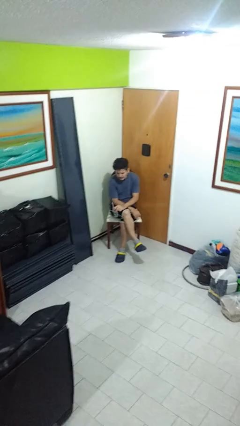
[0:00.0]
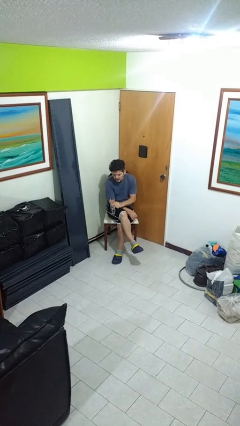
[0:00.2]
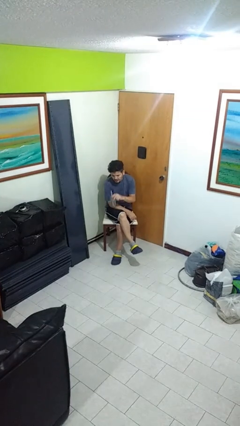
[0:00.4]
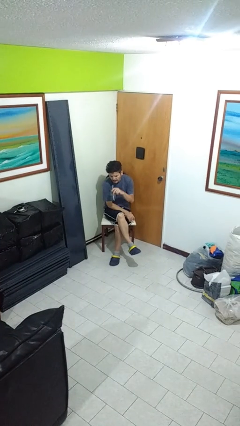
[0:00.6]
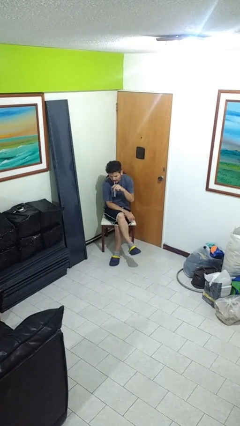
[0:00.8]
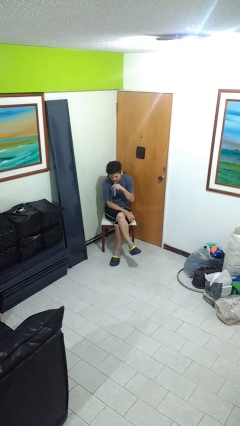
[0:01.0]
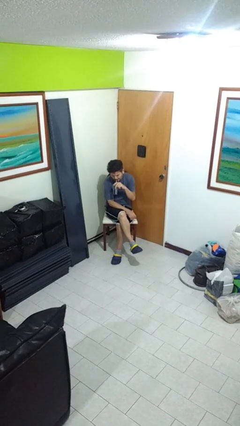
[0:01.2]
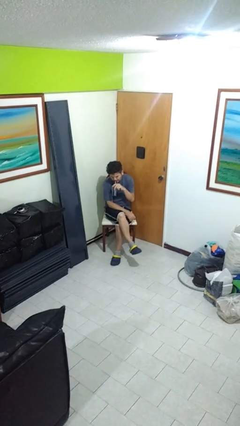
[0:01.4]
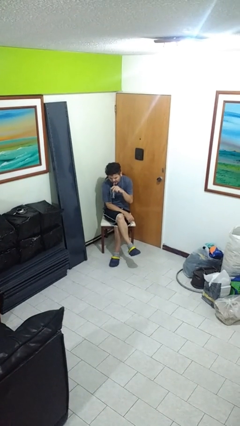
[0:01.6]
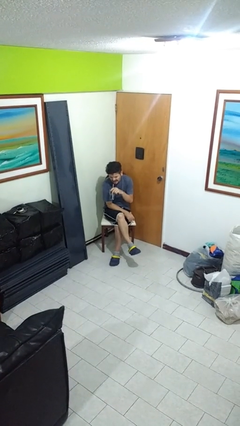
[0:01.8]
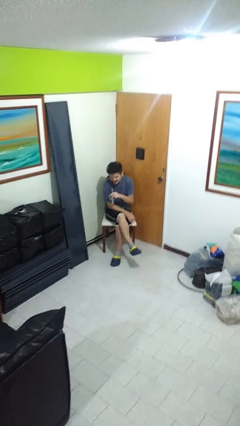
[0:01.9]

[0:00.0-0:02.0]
person drinks from straw

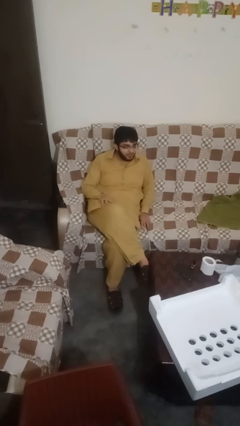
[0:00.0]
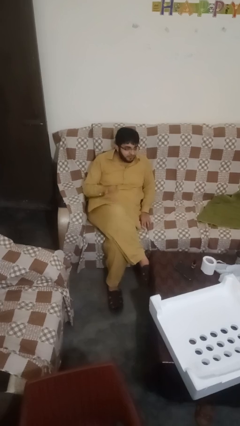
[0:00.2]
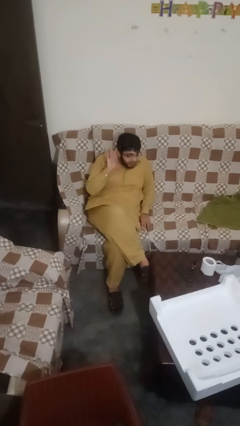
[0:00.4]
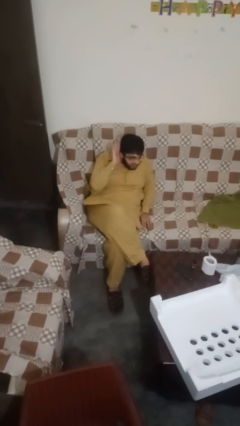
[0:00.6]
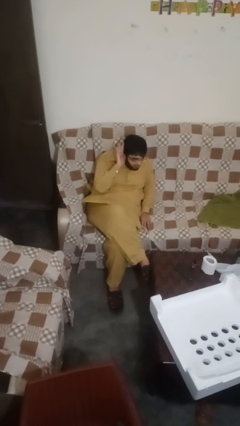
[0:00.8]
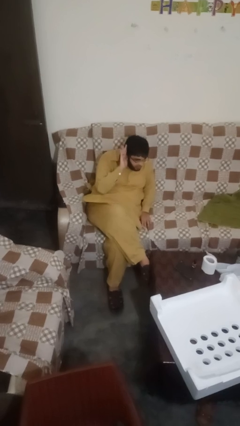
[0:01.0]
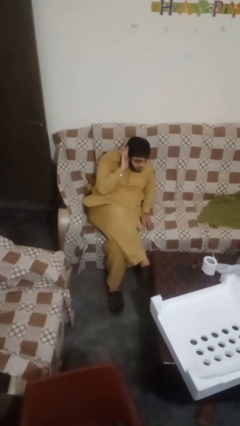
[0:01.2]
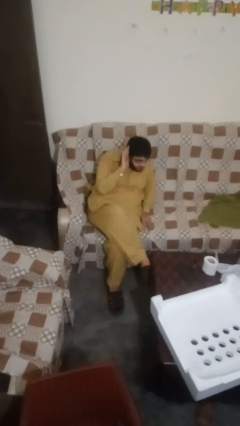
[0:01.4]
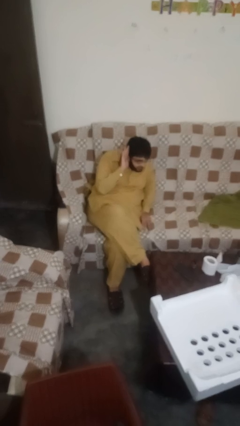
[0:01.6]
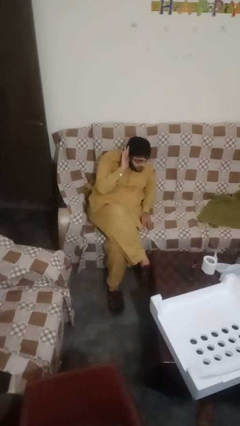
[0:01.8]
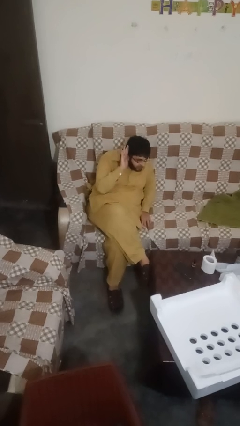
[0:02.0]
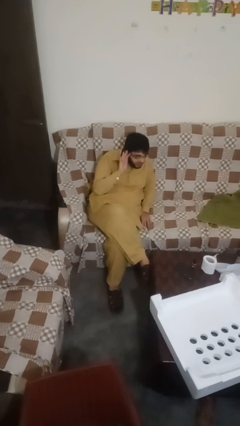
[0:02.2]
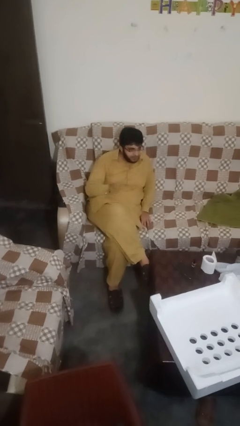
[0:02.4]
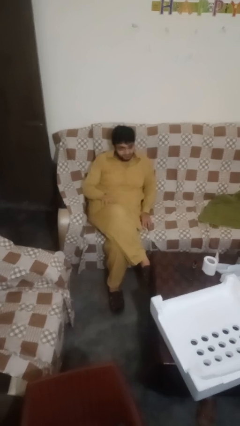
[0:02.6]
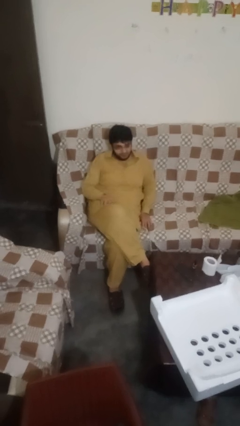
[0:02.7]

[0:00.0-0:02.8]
person gestures listen closely

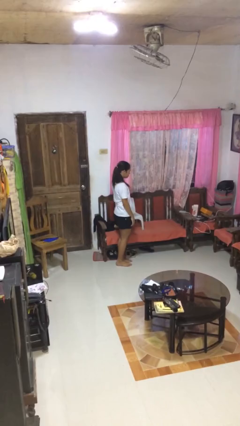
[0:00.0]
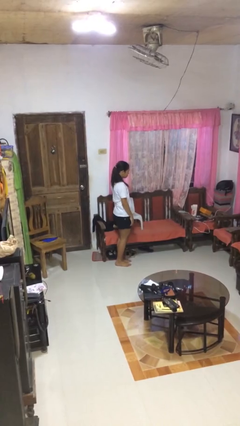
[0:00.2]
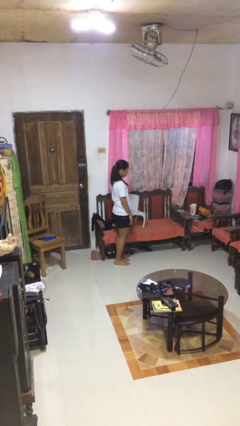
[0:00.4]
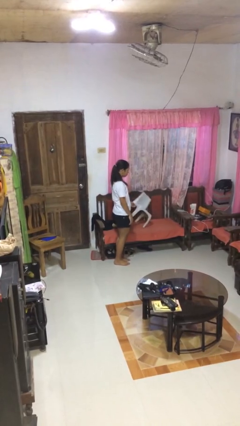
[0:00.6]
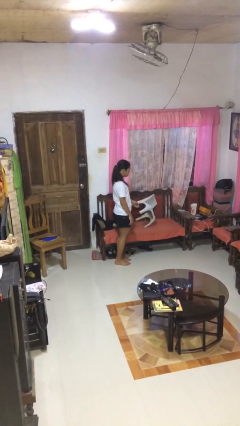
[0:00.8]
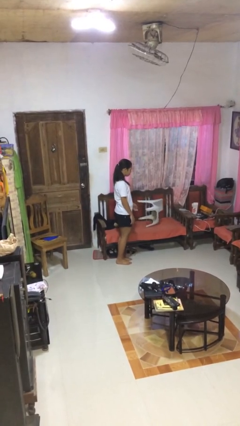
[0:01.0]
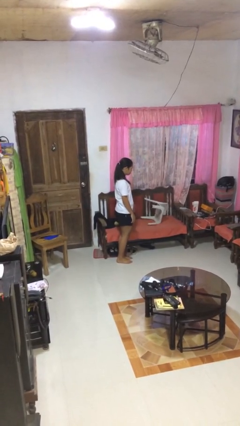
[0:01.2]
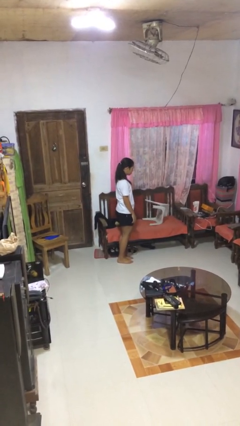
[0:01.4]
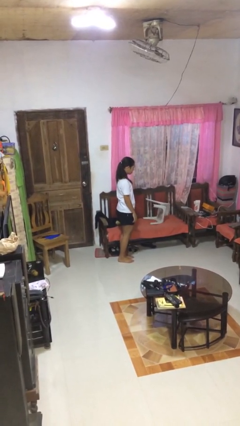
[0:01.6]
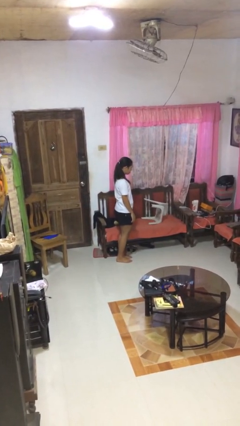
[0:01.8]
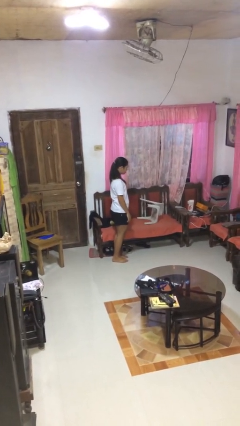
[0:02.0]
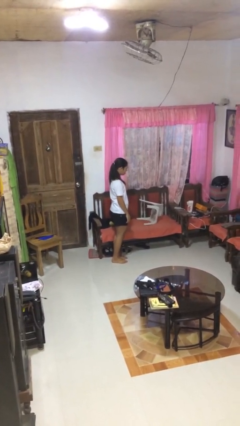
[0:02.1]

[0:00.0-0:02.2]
person knocks over furniture

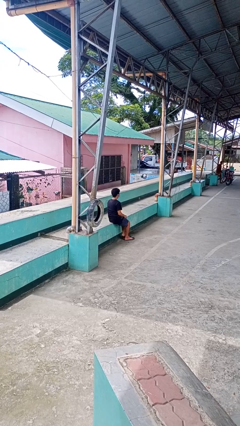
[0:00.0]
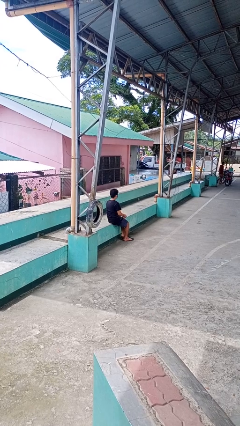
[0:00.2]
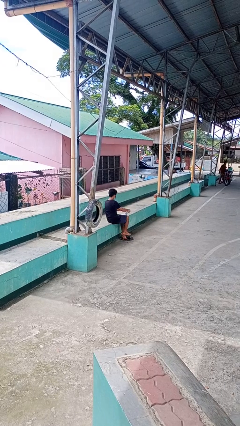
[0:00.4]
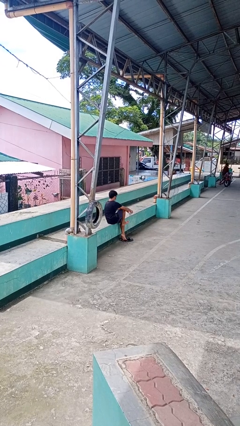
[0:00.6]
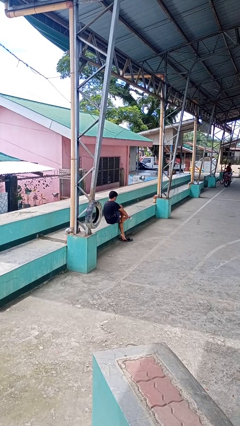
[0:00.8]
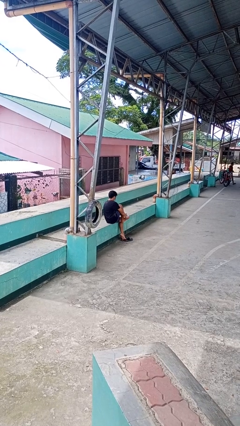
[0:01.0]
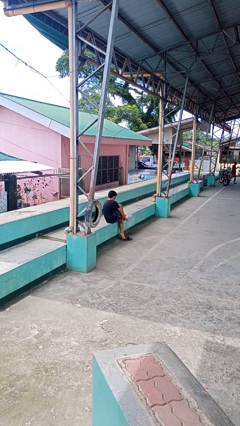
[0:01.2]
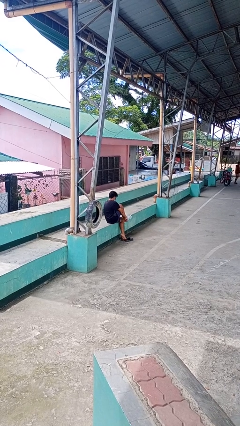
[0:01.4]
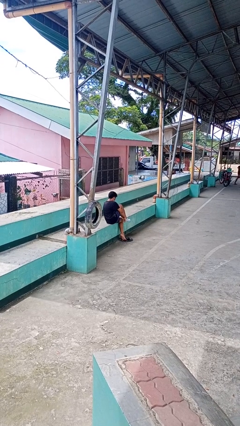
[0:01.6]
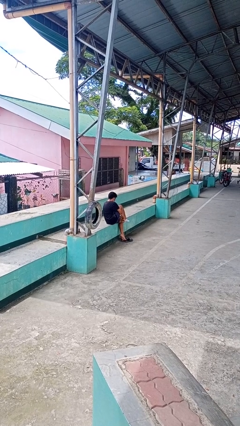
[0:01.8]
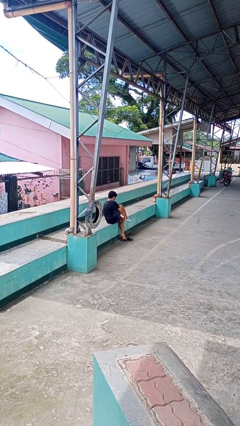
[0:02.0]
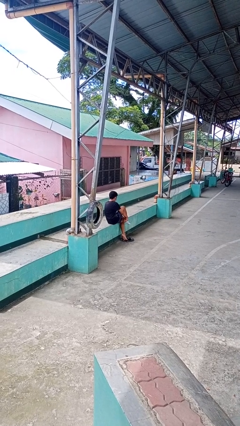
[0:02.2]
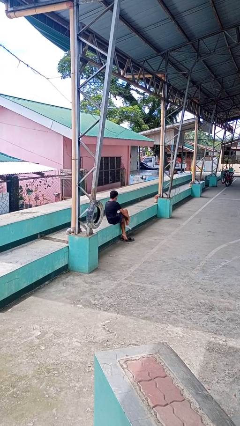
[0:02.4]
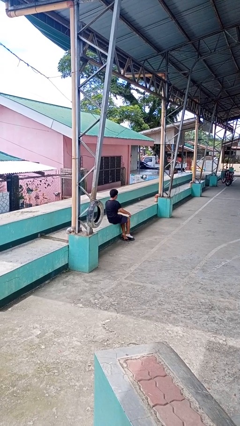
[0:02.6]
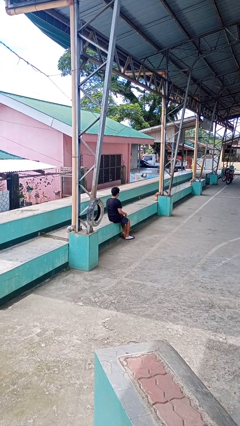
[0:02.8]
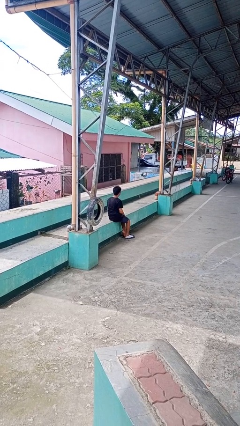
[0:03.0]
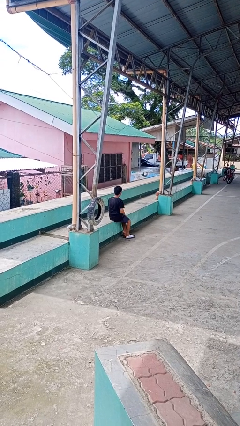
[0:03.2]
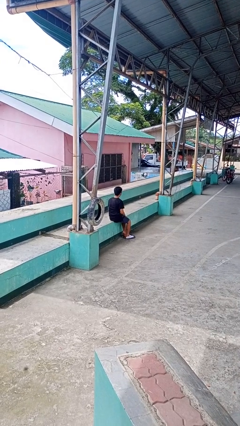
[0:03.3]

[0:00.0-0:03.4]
person puts on socks

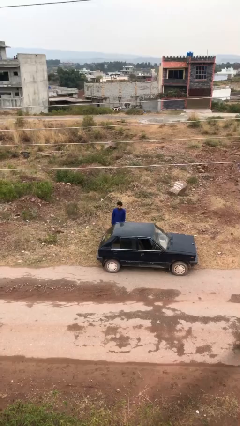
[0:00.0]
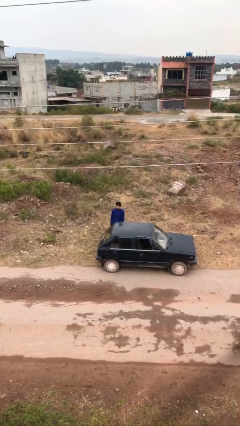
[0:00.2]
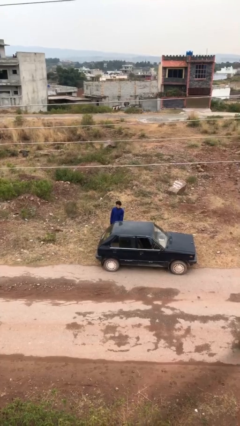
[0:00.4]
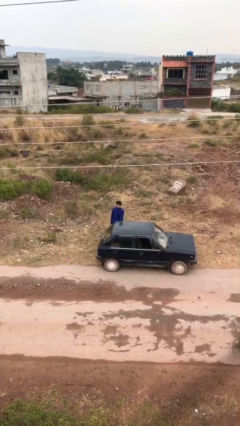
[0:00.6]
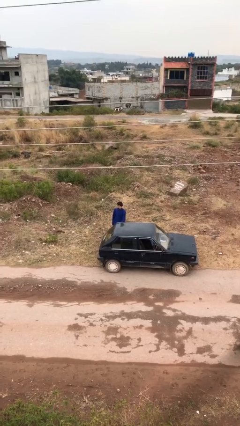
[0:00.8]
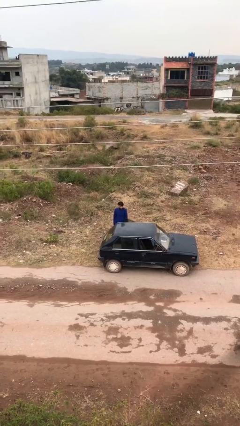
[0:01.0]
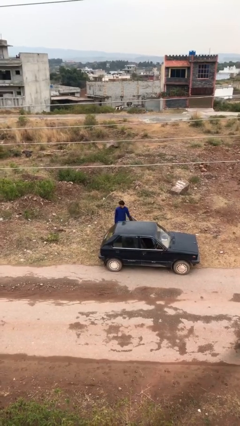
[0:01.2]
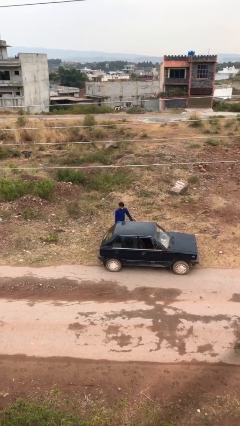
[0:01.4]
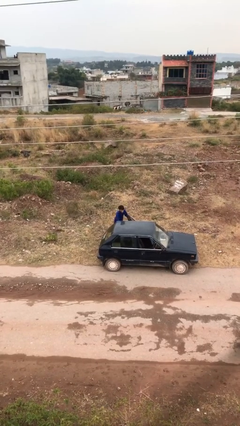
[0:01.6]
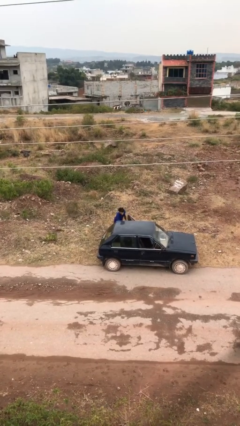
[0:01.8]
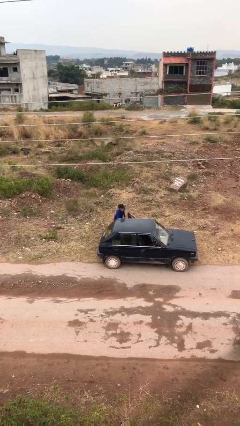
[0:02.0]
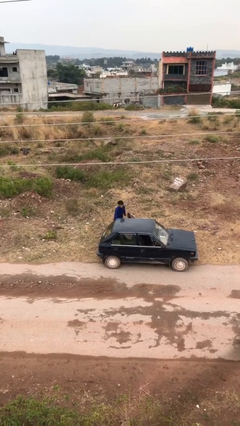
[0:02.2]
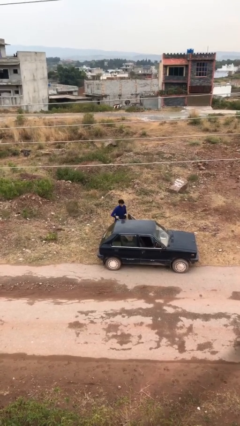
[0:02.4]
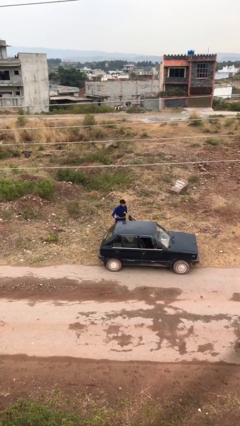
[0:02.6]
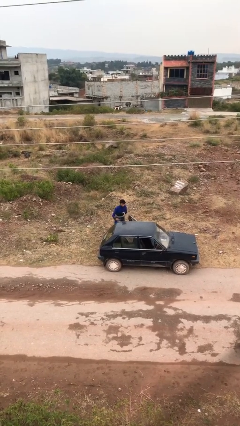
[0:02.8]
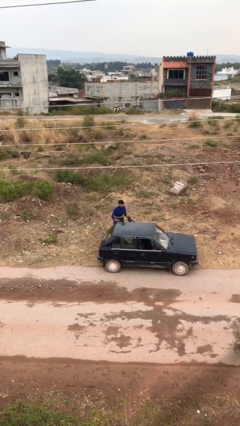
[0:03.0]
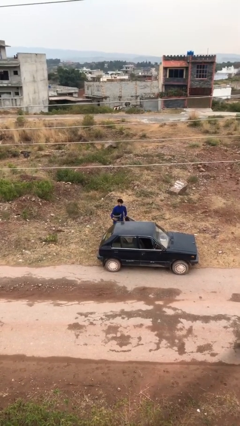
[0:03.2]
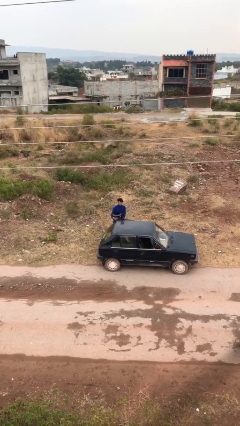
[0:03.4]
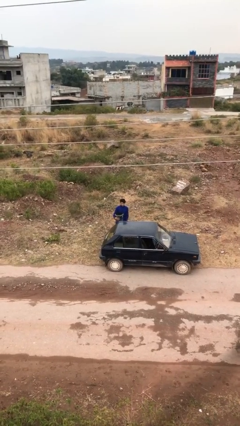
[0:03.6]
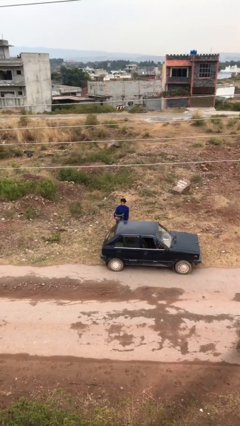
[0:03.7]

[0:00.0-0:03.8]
person unloads car

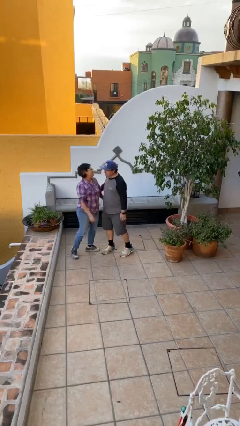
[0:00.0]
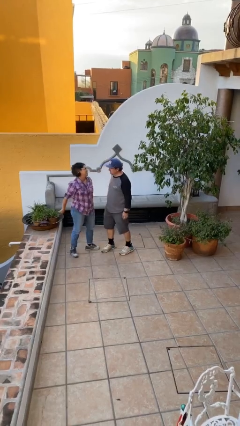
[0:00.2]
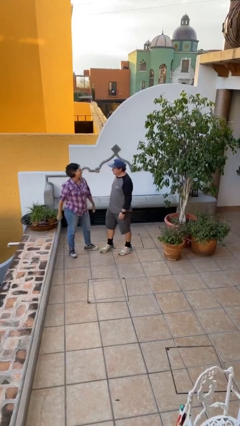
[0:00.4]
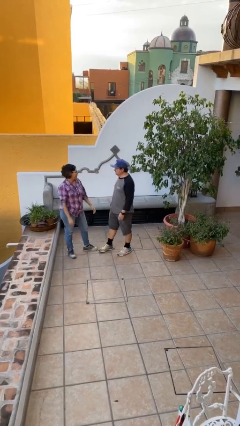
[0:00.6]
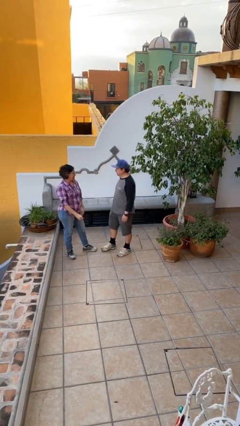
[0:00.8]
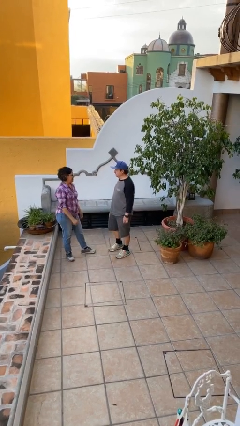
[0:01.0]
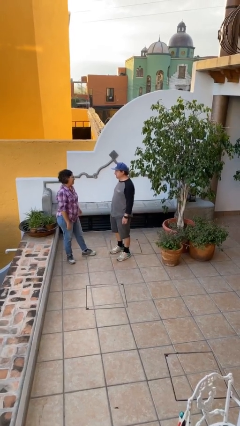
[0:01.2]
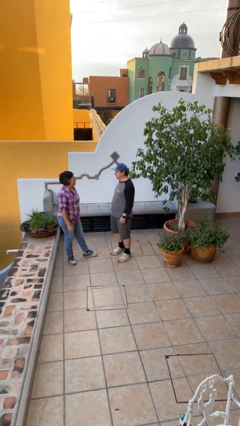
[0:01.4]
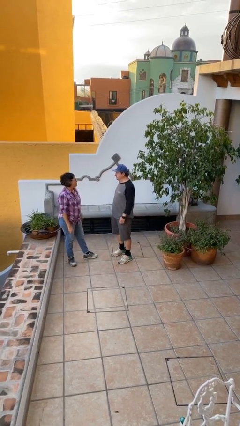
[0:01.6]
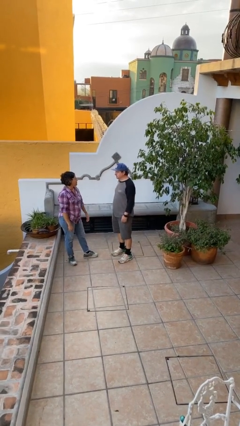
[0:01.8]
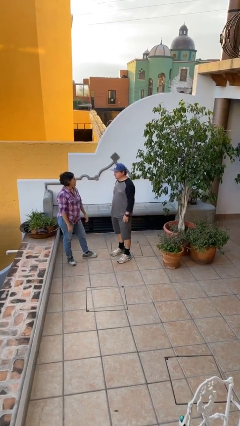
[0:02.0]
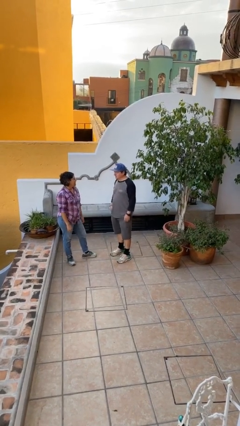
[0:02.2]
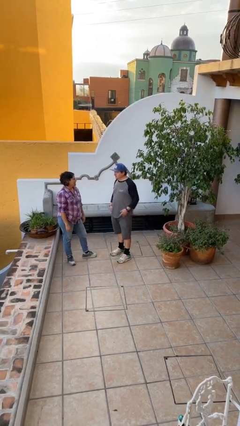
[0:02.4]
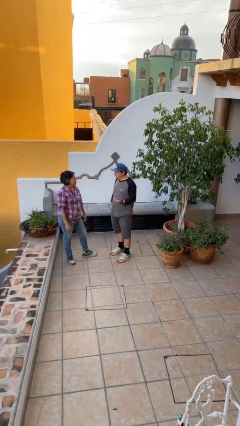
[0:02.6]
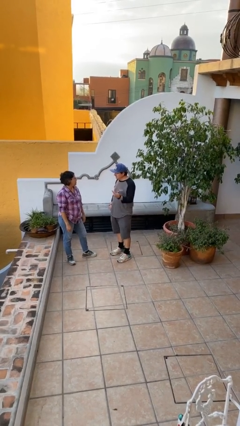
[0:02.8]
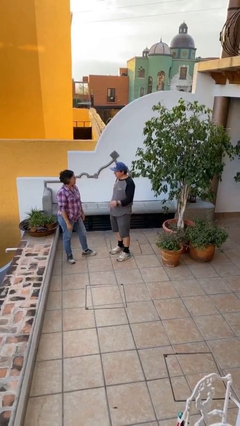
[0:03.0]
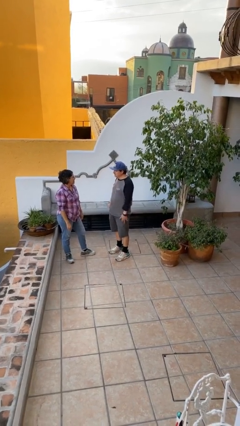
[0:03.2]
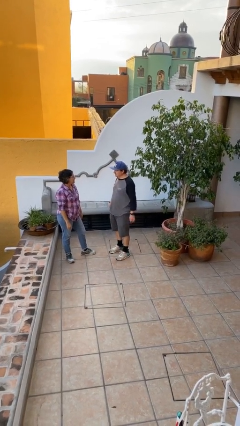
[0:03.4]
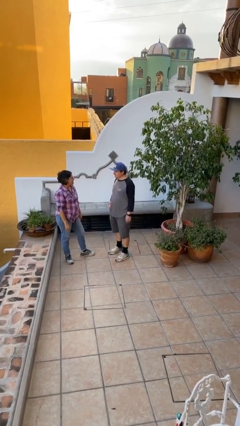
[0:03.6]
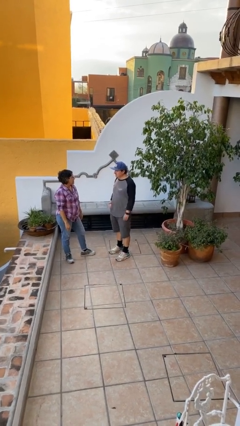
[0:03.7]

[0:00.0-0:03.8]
person talks to person

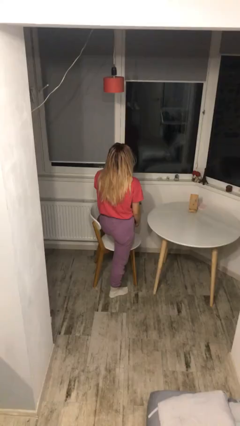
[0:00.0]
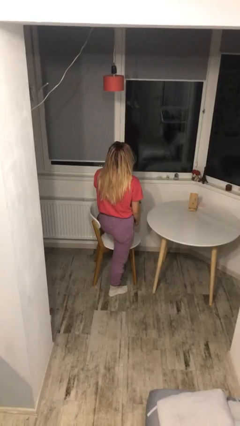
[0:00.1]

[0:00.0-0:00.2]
person gestures number three
